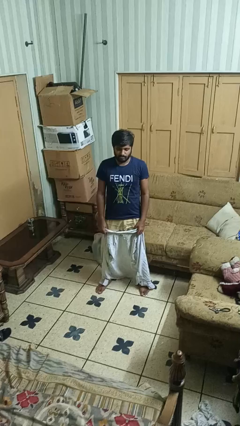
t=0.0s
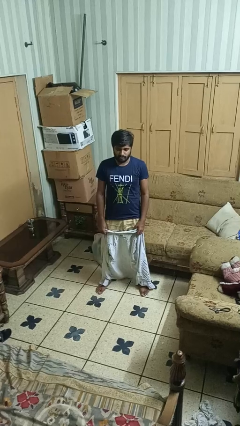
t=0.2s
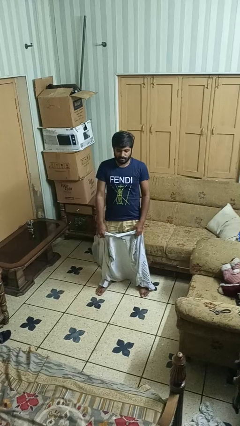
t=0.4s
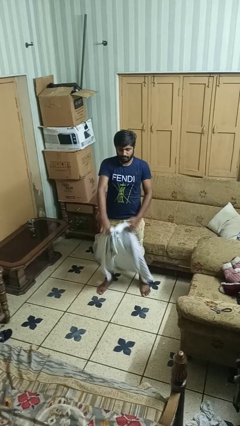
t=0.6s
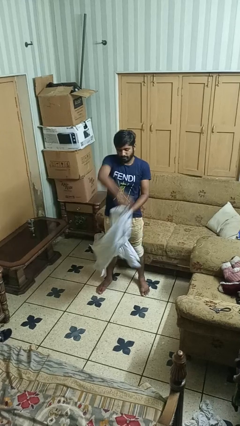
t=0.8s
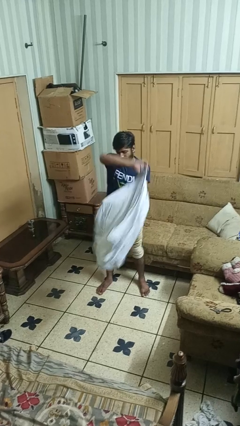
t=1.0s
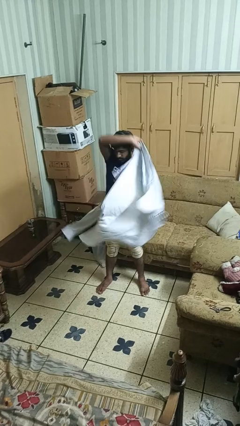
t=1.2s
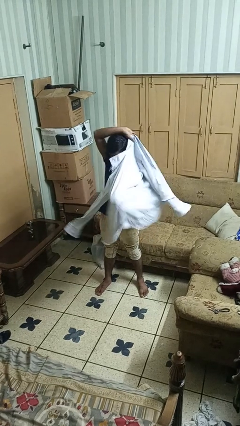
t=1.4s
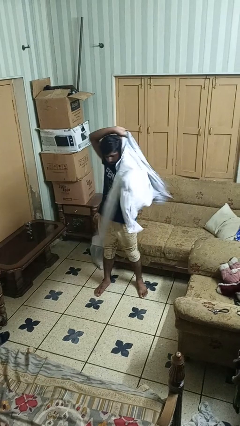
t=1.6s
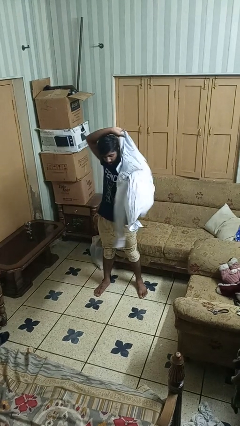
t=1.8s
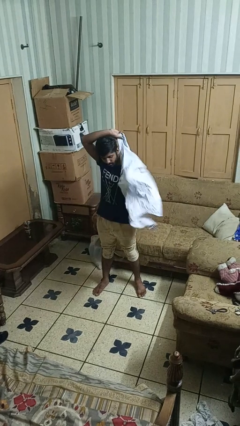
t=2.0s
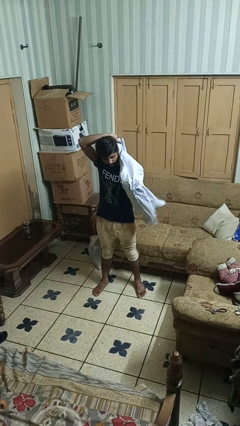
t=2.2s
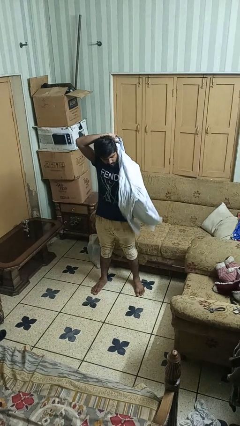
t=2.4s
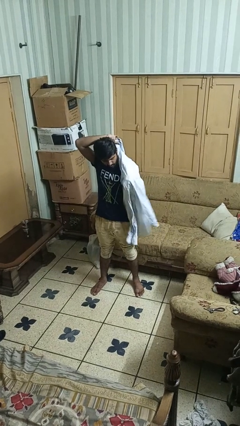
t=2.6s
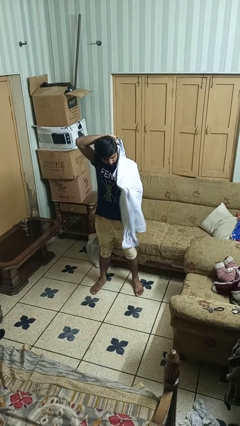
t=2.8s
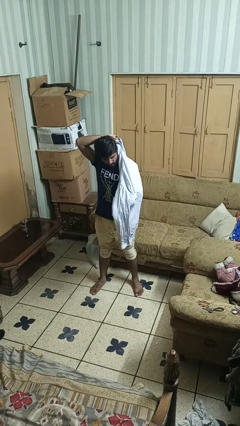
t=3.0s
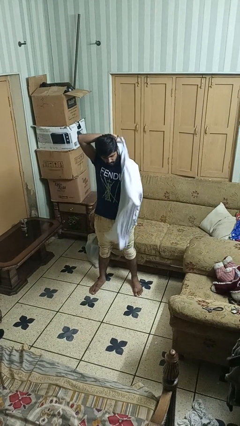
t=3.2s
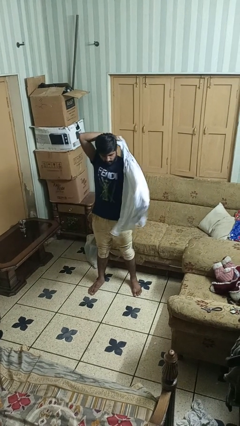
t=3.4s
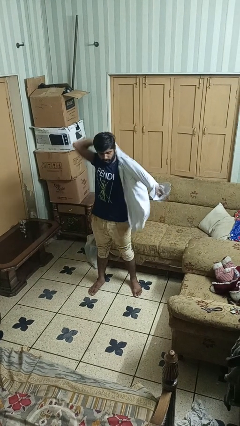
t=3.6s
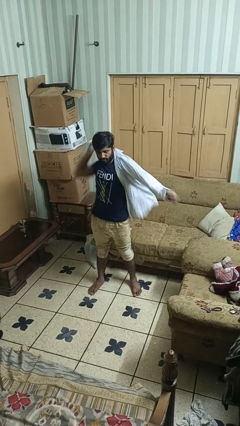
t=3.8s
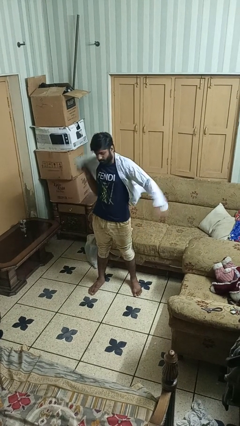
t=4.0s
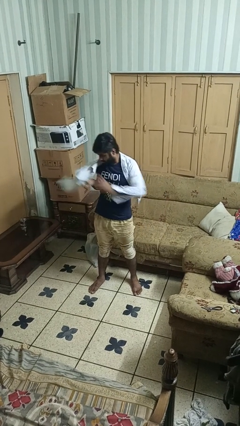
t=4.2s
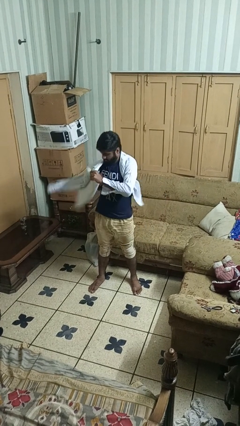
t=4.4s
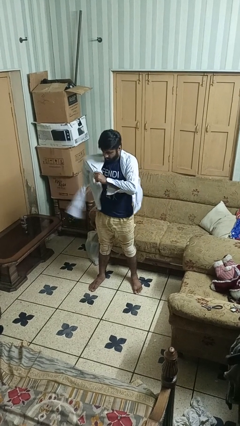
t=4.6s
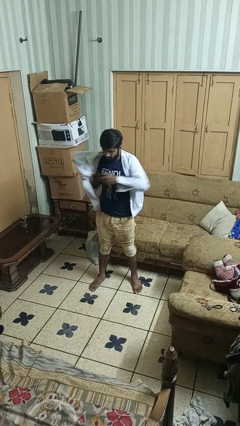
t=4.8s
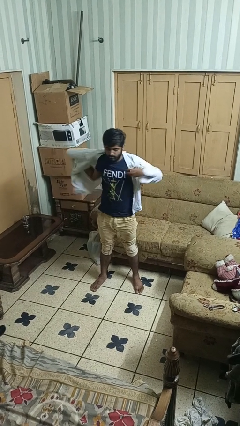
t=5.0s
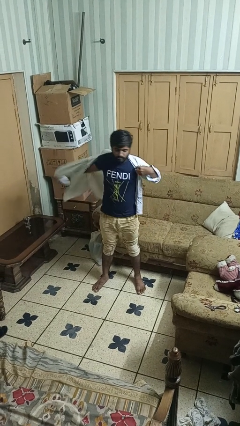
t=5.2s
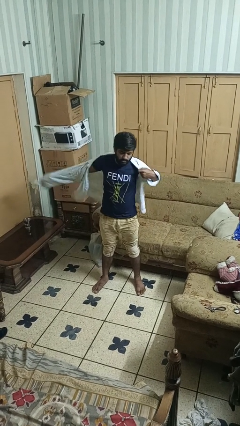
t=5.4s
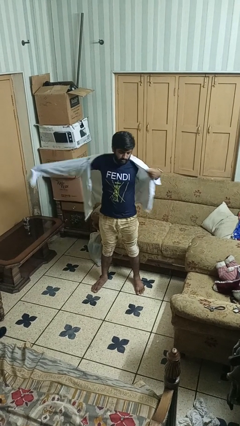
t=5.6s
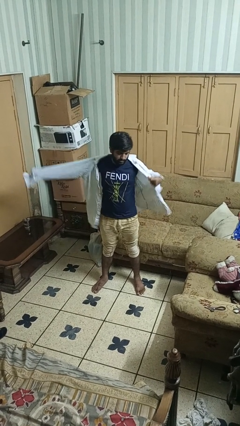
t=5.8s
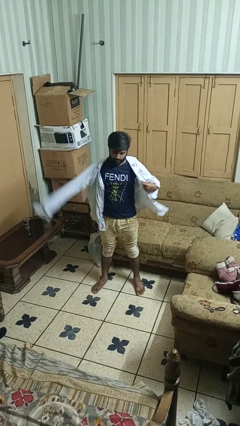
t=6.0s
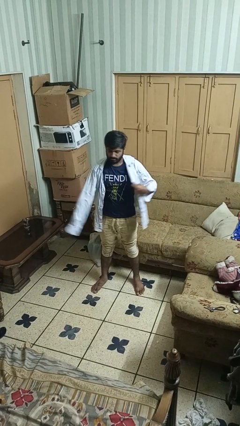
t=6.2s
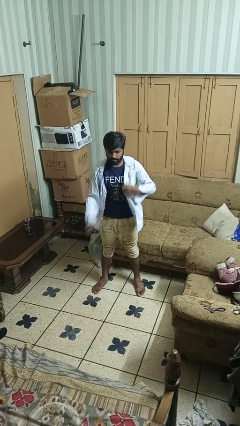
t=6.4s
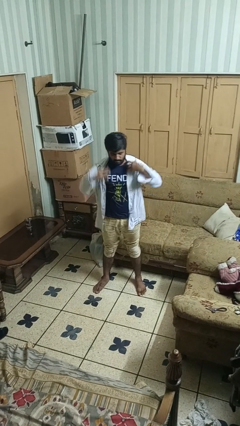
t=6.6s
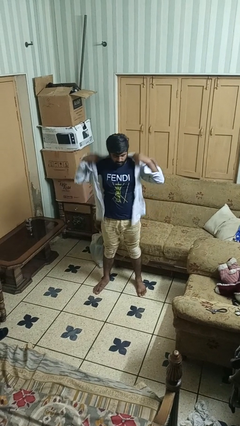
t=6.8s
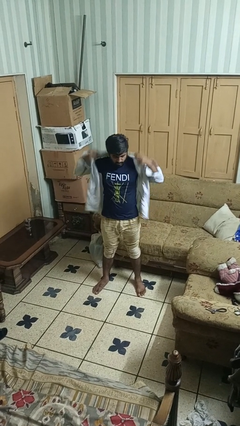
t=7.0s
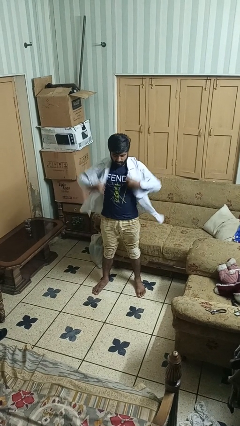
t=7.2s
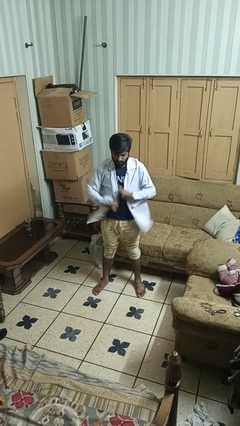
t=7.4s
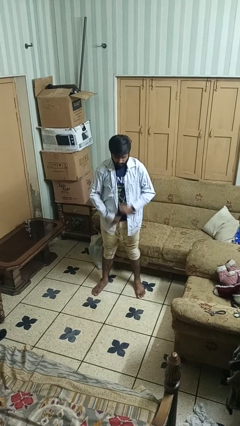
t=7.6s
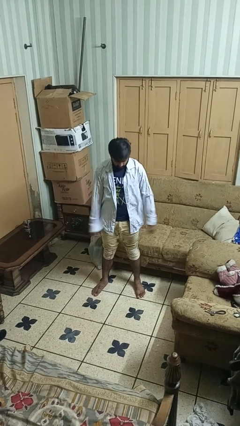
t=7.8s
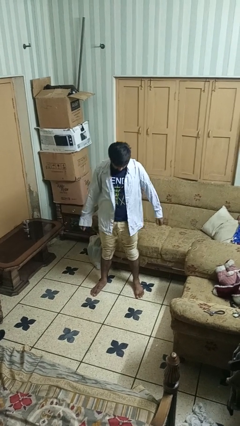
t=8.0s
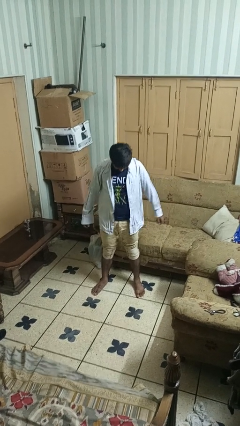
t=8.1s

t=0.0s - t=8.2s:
person puts on shirt

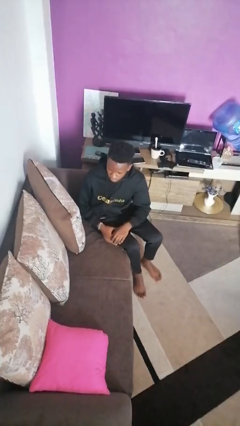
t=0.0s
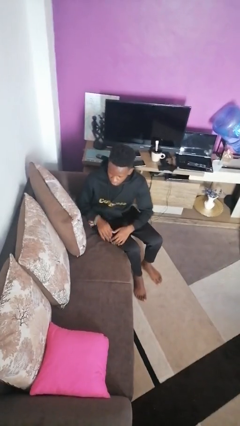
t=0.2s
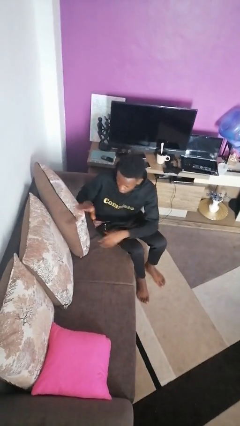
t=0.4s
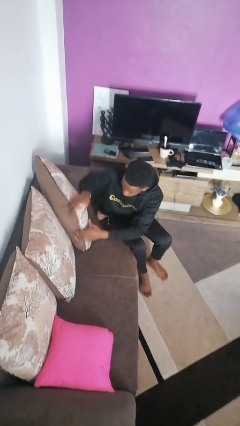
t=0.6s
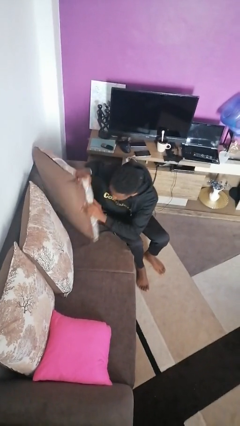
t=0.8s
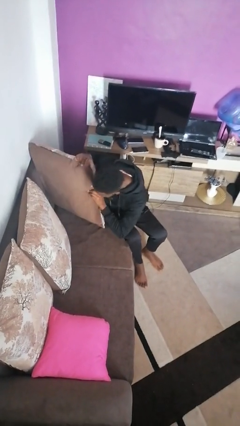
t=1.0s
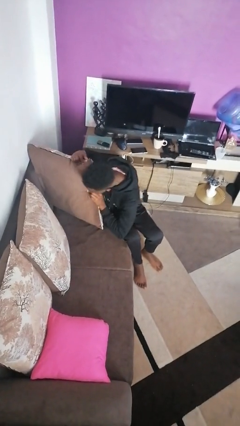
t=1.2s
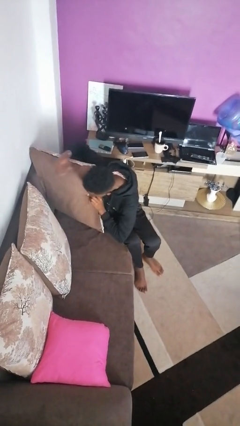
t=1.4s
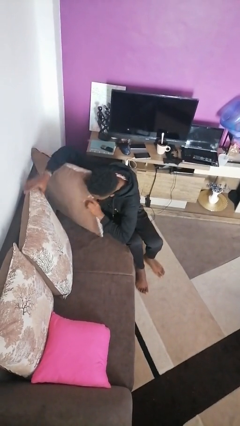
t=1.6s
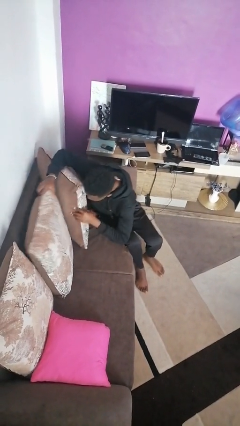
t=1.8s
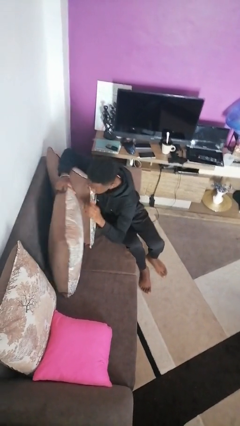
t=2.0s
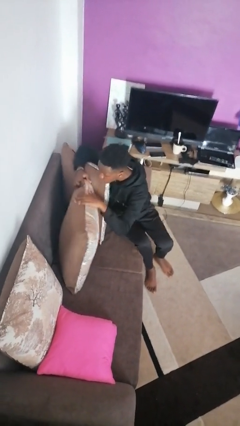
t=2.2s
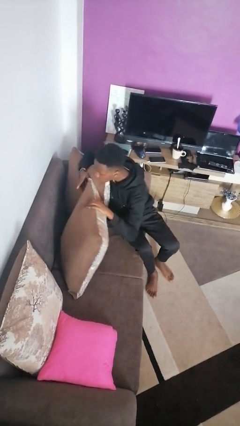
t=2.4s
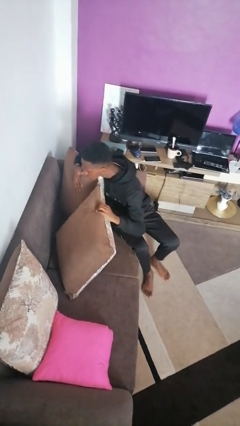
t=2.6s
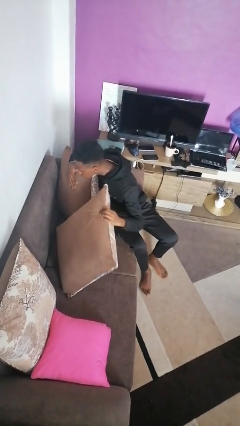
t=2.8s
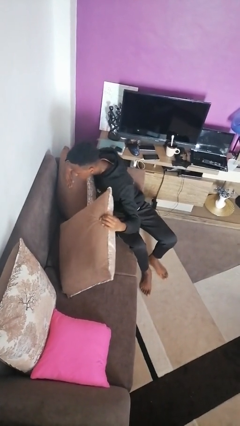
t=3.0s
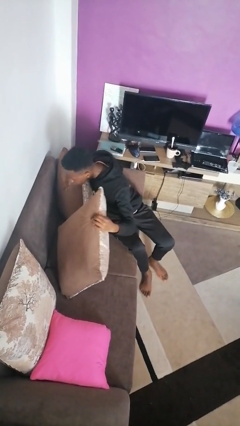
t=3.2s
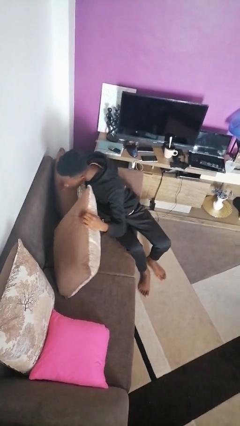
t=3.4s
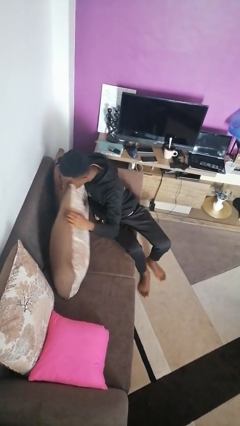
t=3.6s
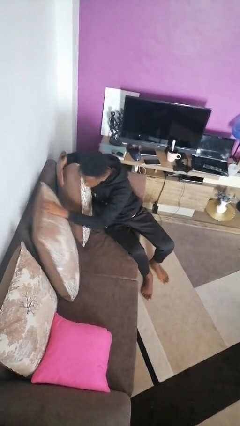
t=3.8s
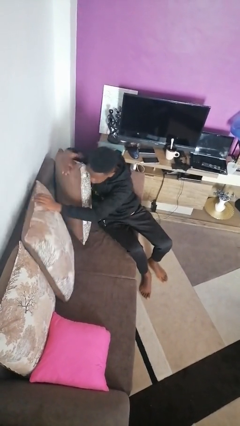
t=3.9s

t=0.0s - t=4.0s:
person searches in couch

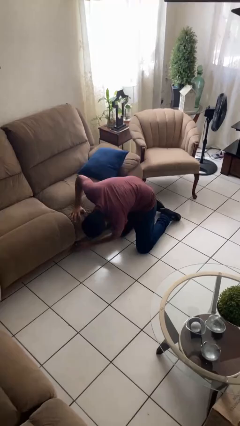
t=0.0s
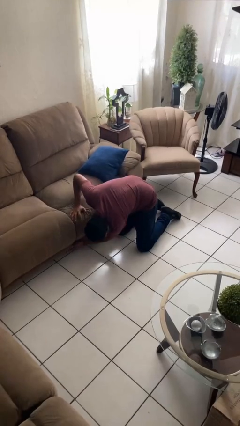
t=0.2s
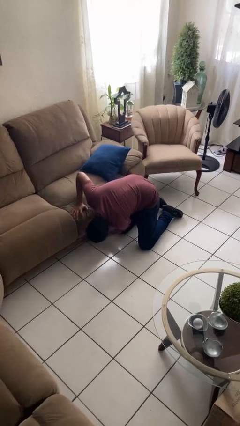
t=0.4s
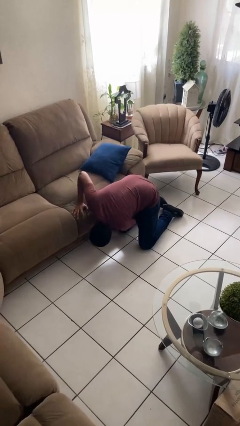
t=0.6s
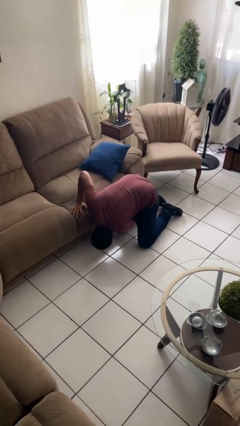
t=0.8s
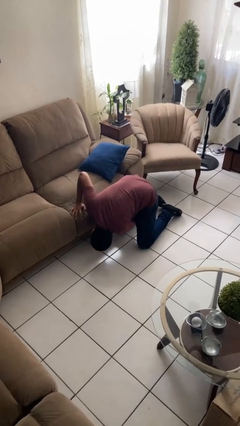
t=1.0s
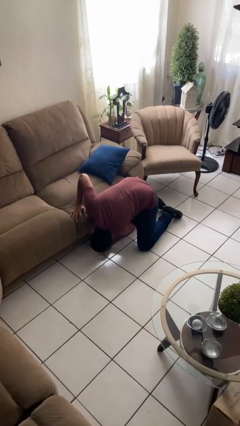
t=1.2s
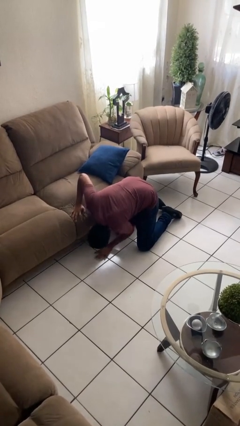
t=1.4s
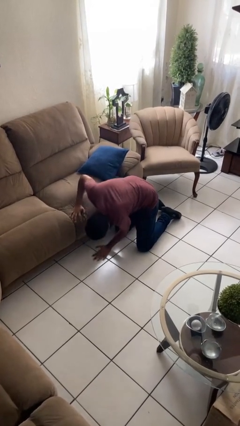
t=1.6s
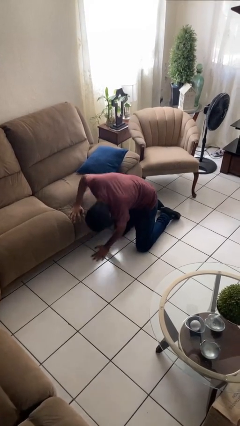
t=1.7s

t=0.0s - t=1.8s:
person searches under couch

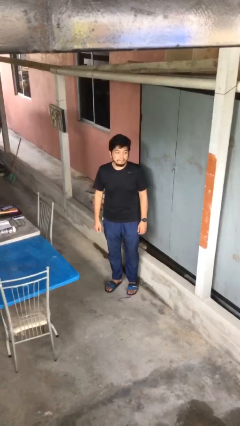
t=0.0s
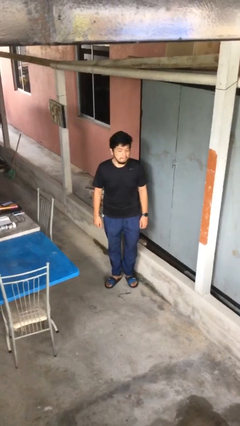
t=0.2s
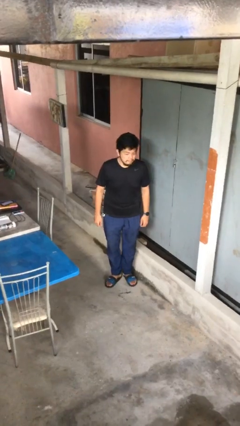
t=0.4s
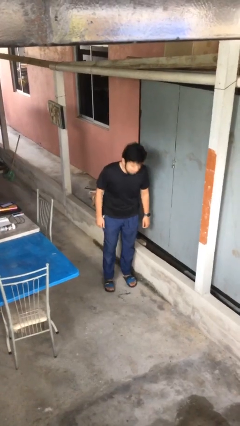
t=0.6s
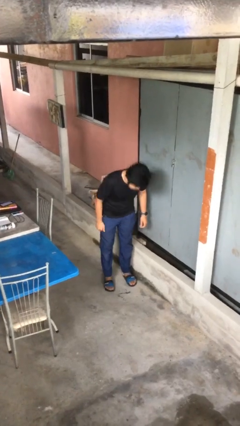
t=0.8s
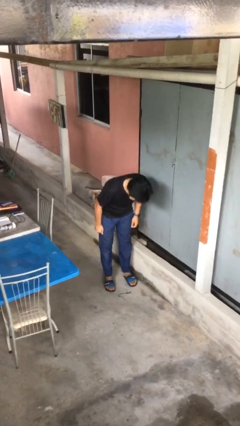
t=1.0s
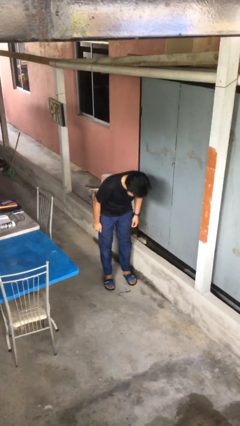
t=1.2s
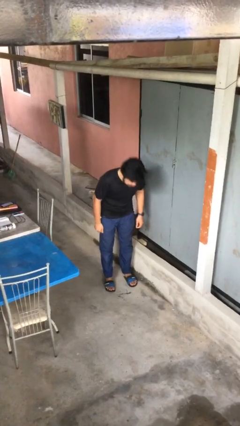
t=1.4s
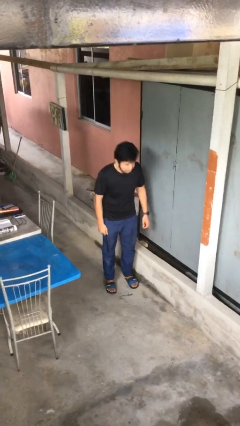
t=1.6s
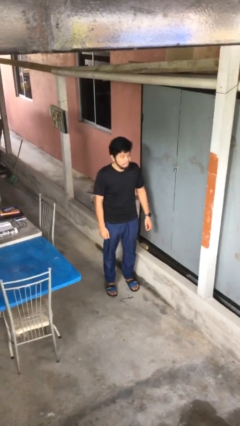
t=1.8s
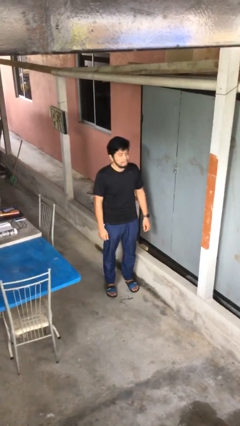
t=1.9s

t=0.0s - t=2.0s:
person bows

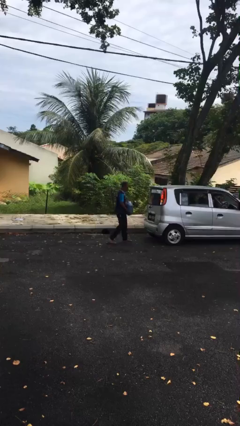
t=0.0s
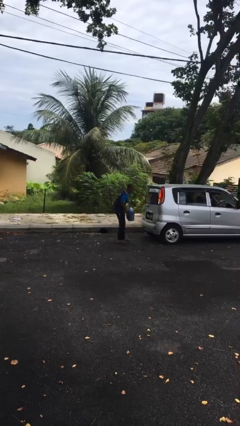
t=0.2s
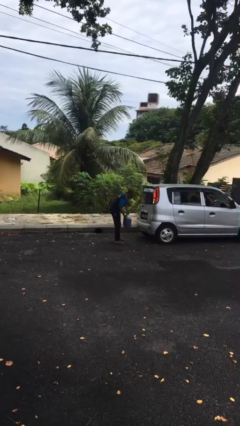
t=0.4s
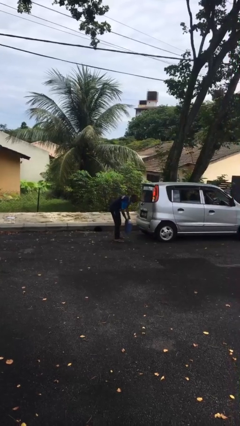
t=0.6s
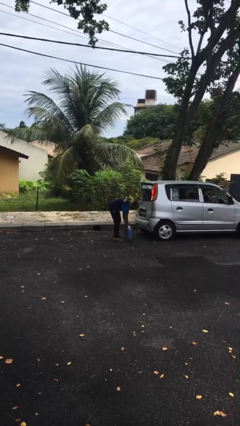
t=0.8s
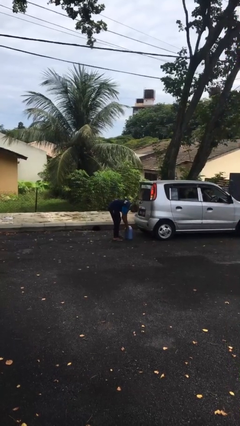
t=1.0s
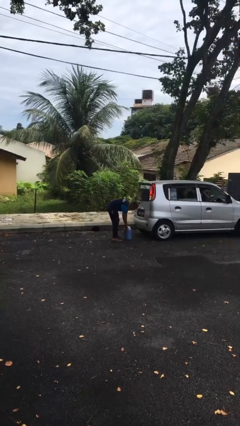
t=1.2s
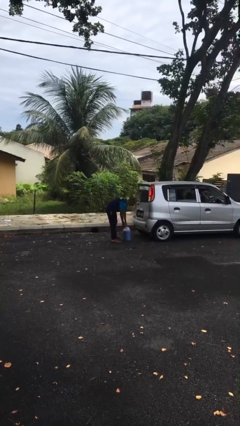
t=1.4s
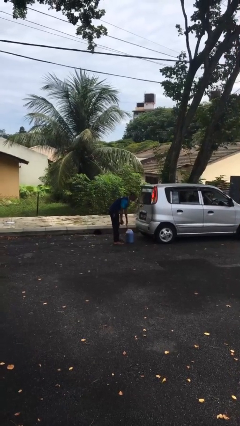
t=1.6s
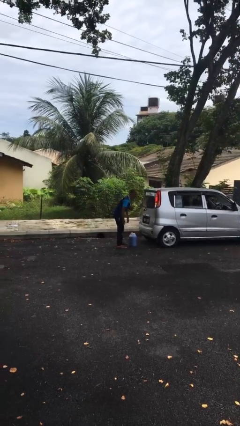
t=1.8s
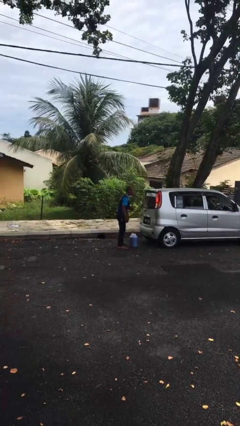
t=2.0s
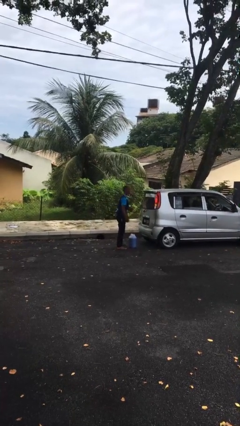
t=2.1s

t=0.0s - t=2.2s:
person puts down object on floor
